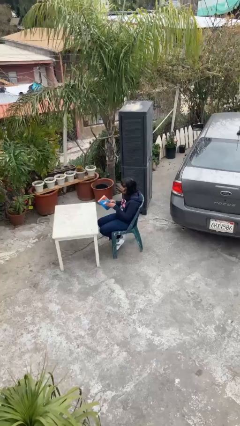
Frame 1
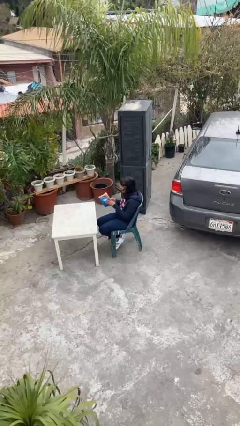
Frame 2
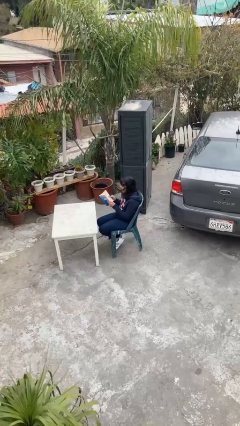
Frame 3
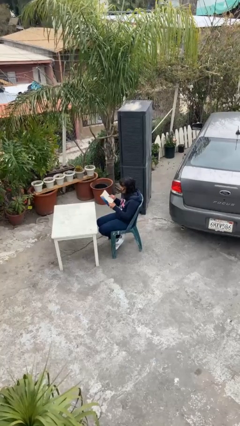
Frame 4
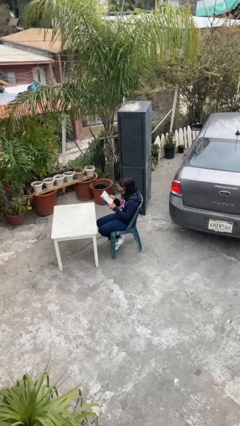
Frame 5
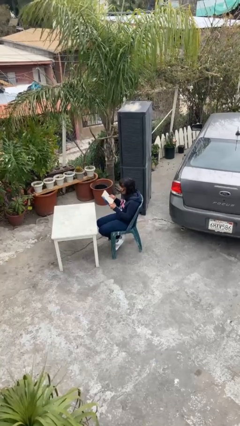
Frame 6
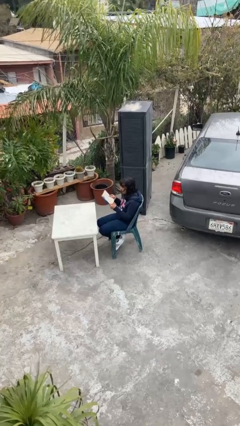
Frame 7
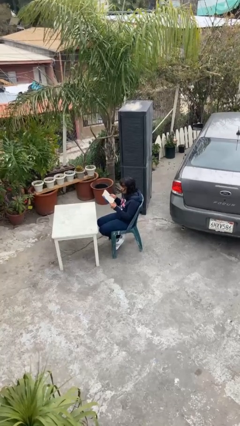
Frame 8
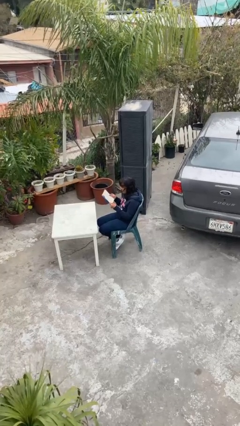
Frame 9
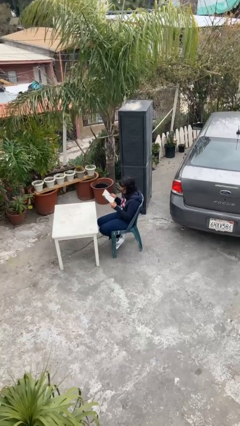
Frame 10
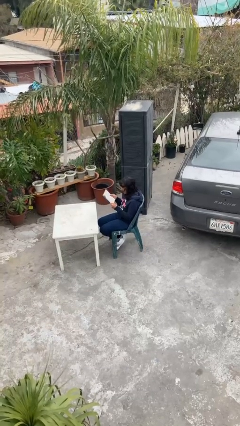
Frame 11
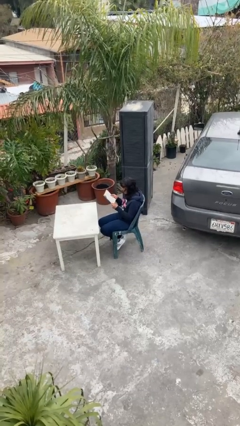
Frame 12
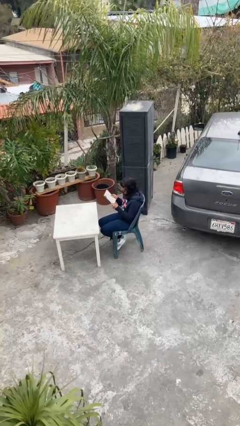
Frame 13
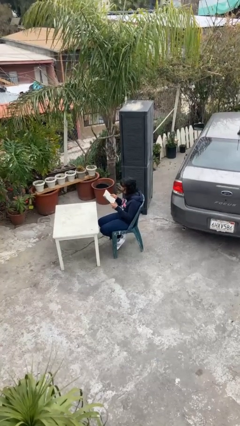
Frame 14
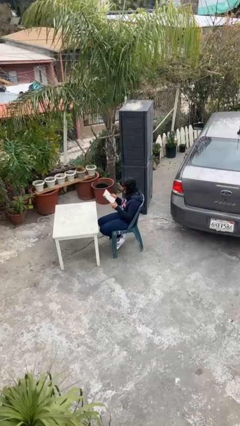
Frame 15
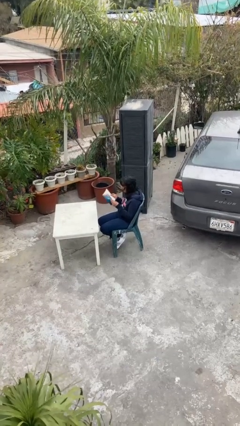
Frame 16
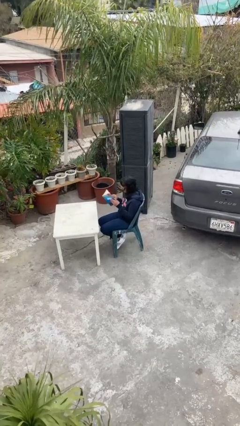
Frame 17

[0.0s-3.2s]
person reads document

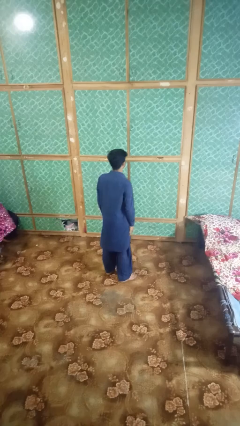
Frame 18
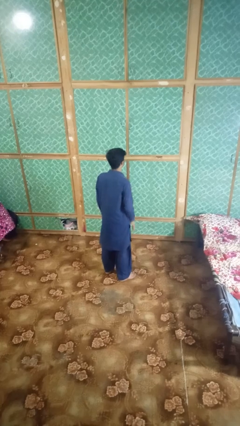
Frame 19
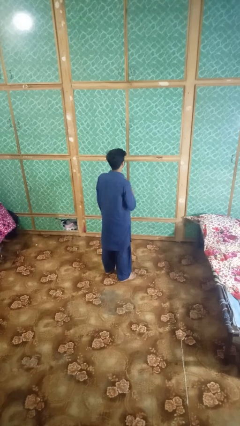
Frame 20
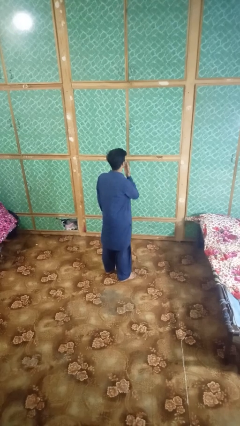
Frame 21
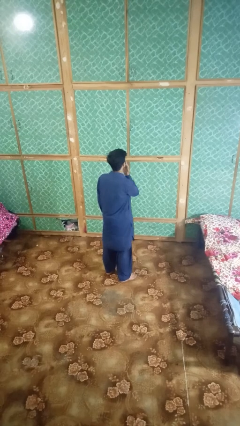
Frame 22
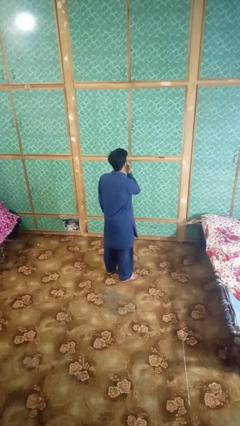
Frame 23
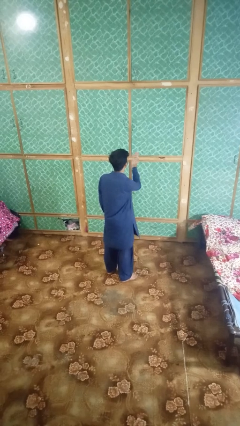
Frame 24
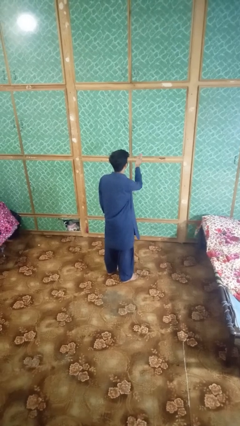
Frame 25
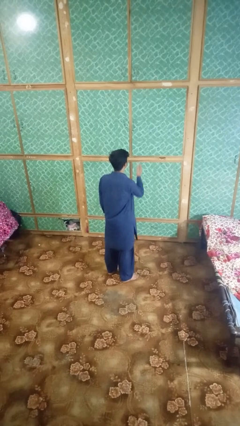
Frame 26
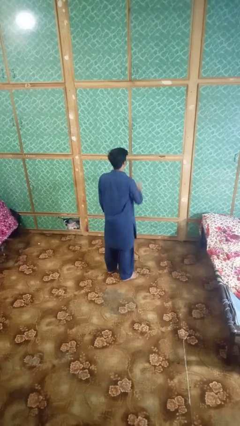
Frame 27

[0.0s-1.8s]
person gestures blow kiss

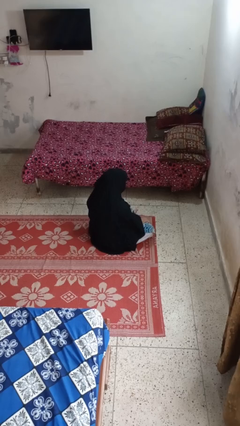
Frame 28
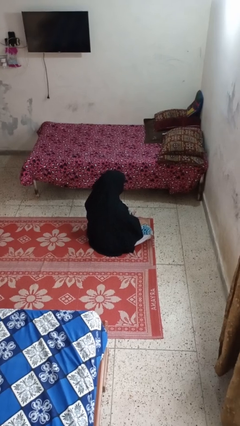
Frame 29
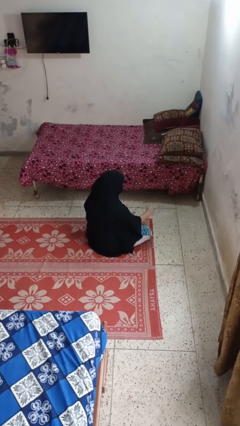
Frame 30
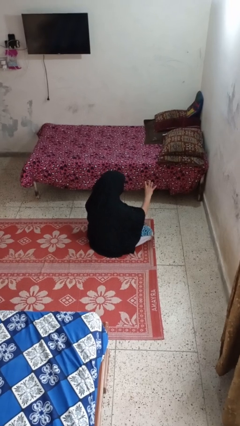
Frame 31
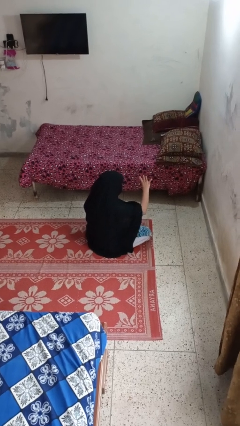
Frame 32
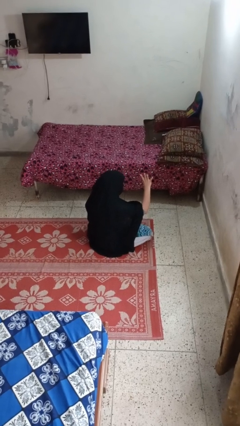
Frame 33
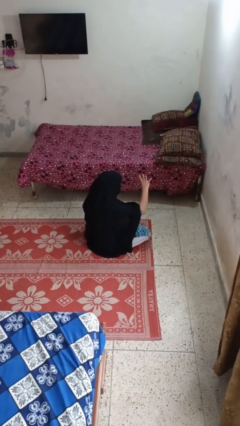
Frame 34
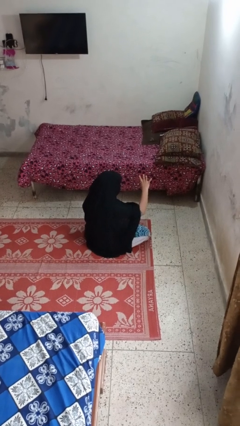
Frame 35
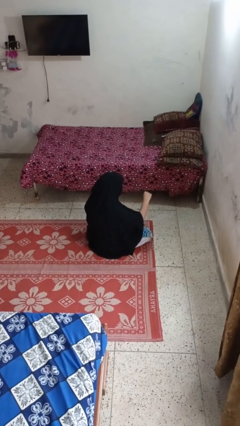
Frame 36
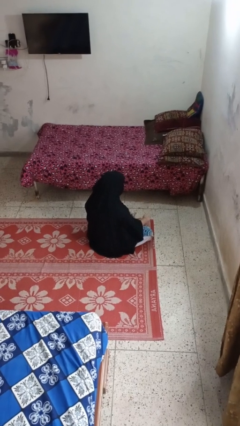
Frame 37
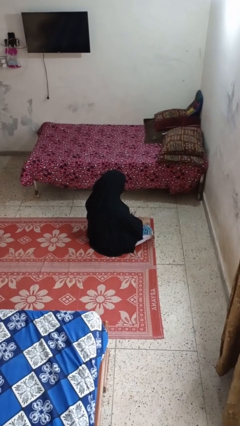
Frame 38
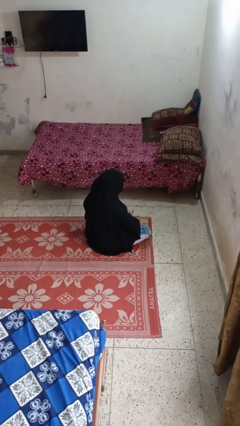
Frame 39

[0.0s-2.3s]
person gestures number four

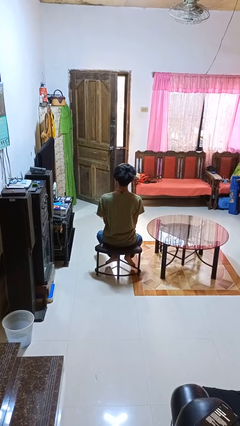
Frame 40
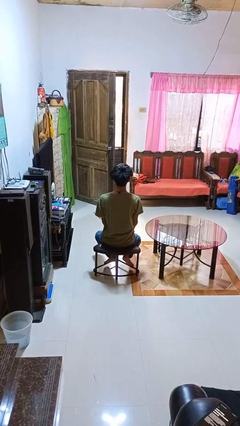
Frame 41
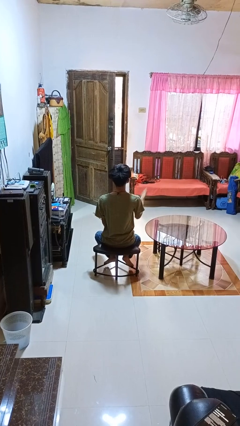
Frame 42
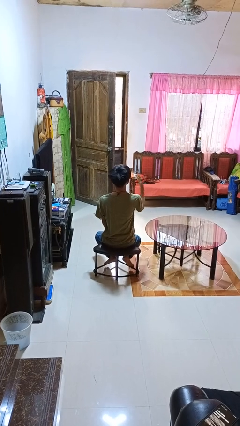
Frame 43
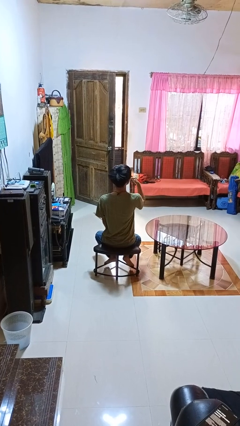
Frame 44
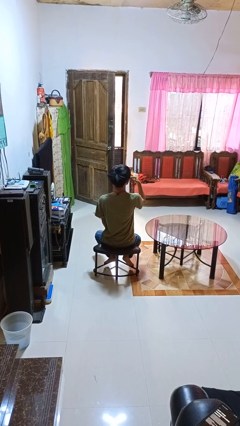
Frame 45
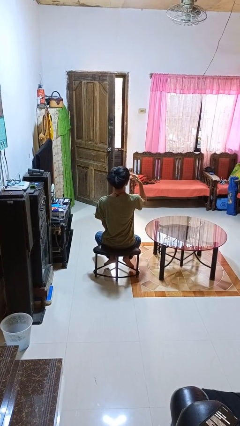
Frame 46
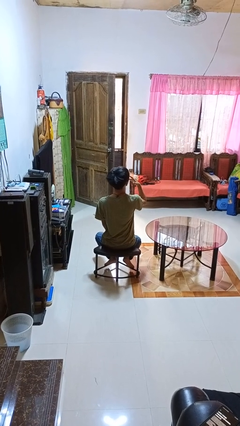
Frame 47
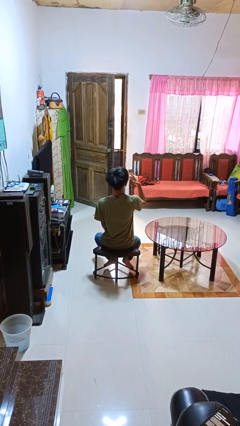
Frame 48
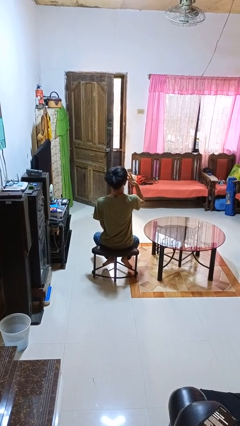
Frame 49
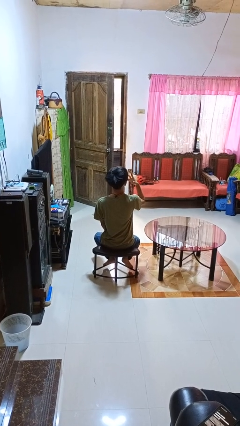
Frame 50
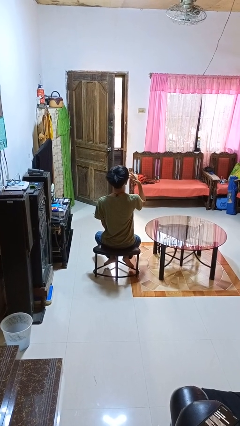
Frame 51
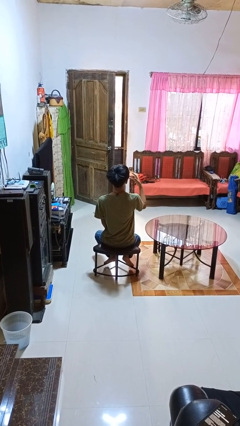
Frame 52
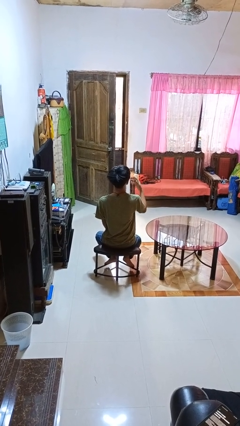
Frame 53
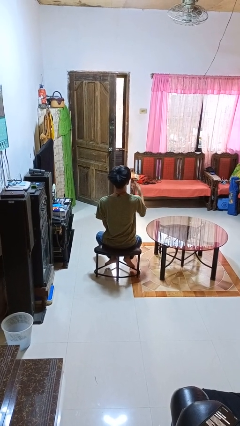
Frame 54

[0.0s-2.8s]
person licks fingers

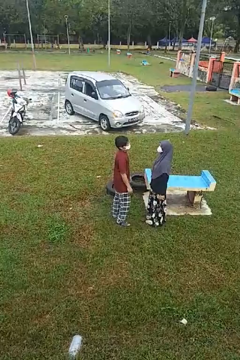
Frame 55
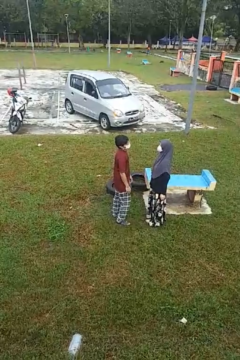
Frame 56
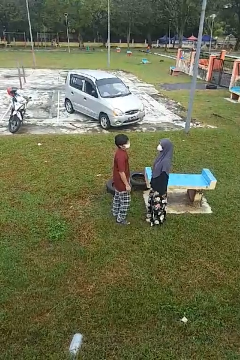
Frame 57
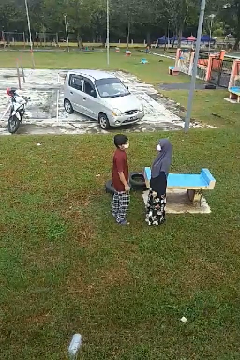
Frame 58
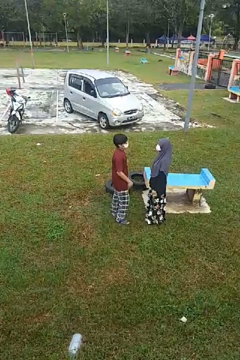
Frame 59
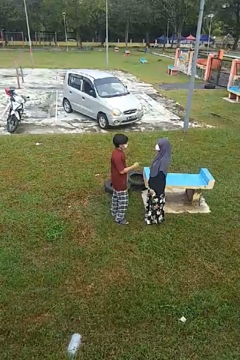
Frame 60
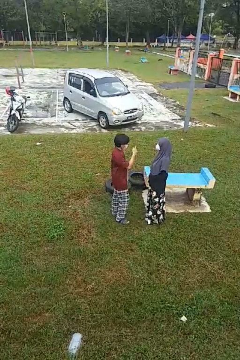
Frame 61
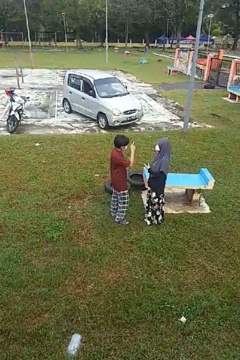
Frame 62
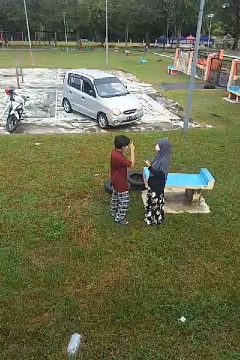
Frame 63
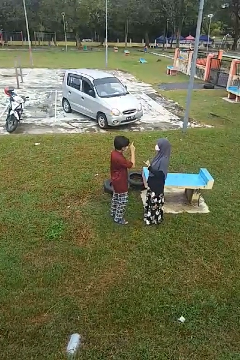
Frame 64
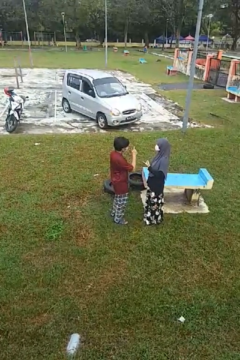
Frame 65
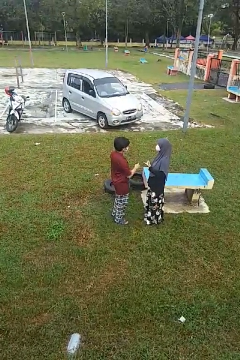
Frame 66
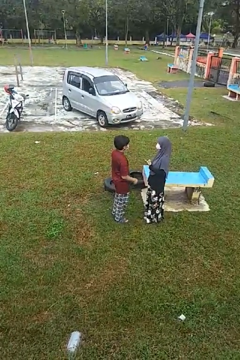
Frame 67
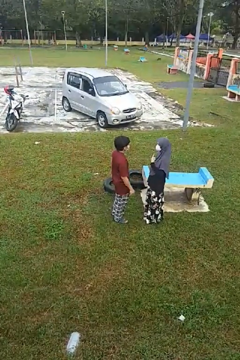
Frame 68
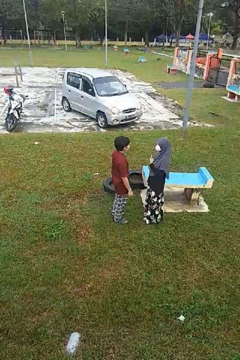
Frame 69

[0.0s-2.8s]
person talks to person

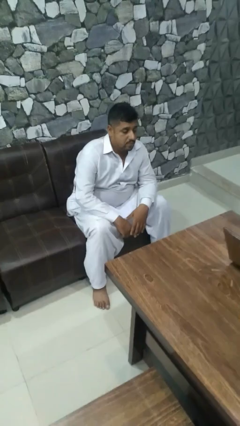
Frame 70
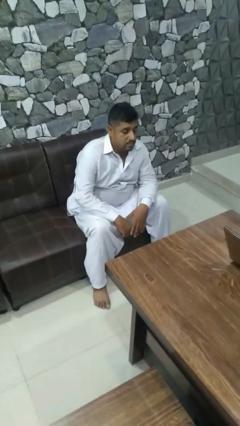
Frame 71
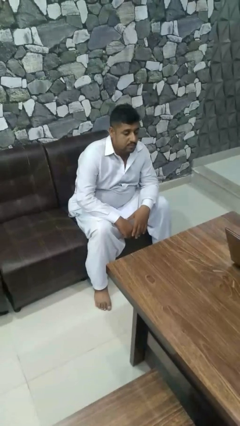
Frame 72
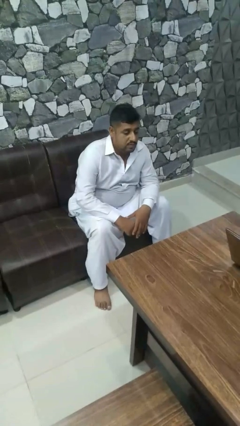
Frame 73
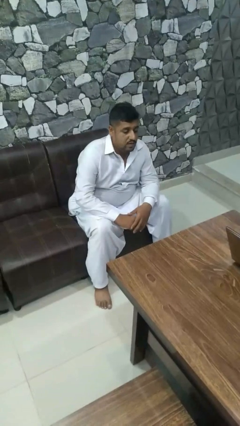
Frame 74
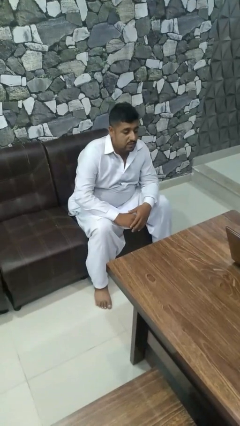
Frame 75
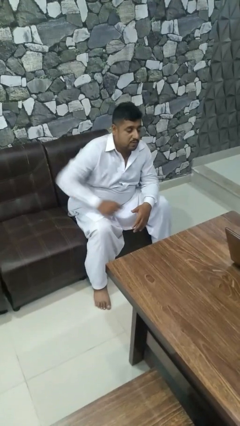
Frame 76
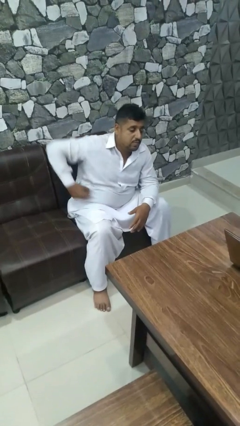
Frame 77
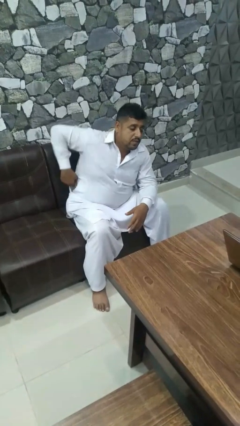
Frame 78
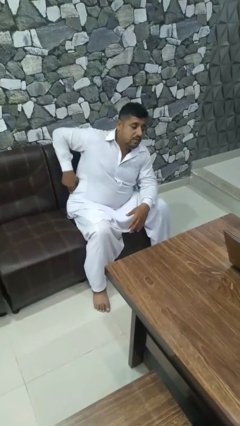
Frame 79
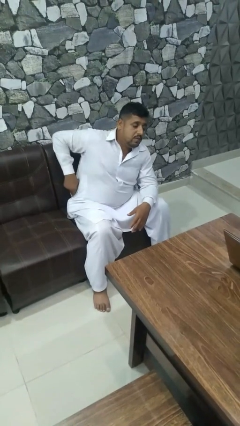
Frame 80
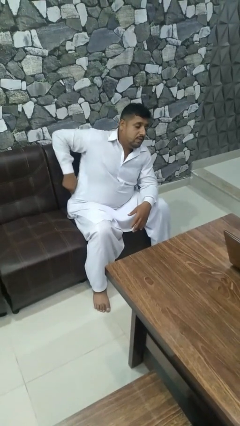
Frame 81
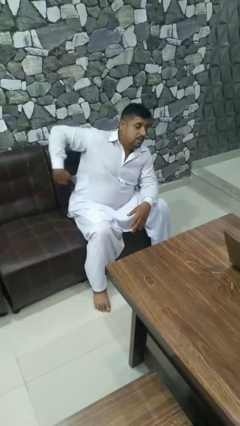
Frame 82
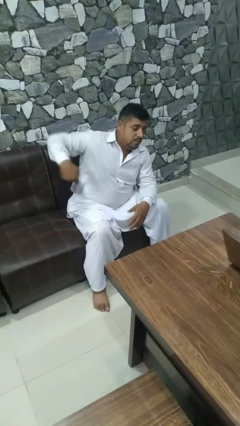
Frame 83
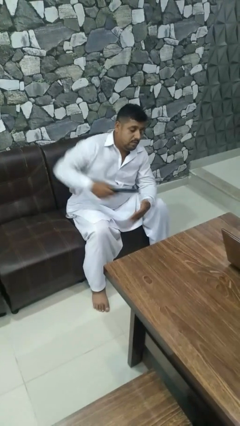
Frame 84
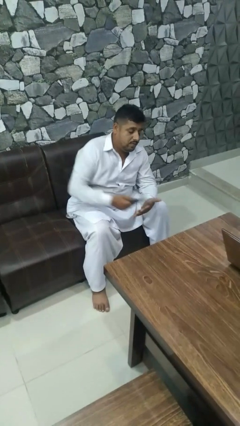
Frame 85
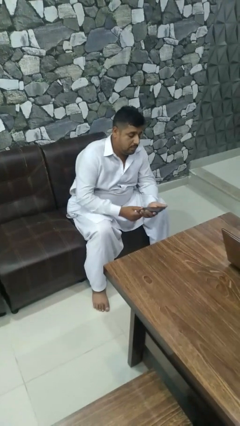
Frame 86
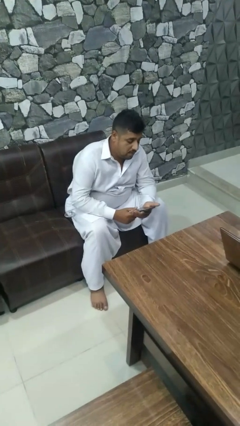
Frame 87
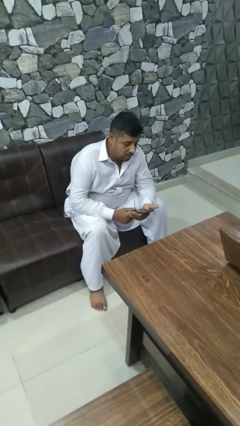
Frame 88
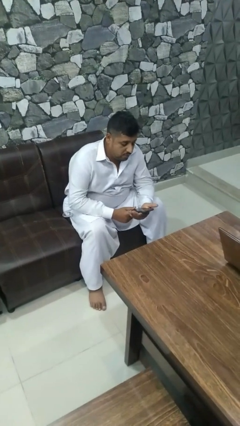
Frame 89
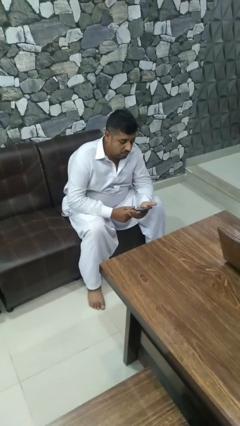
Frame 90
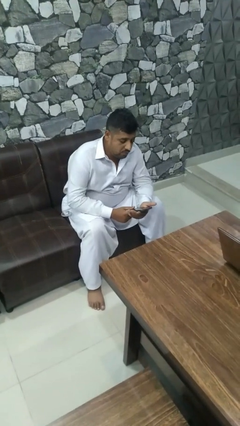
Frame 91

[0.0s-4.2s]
person takes phone from pocket

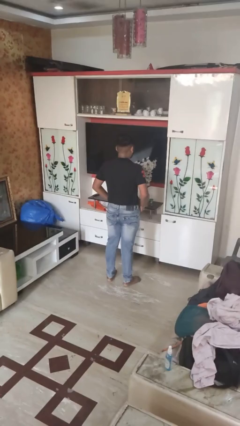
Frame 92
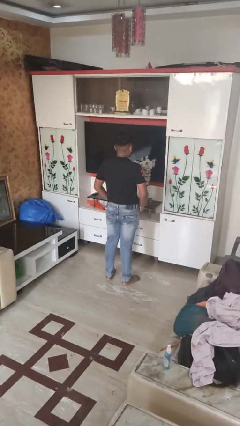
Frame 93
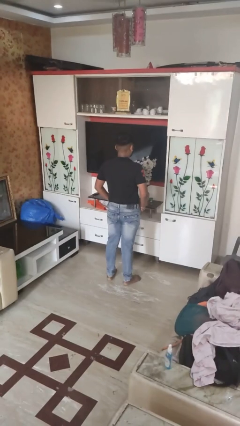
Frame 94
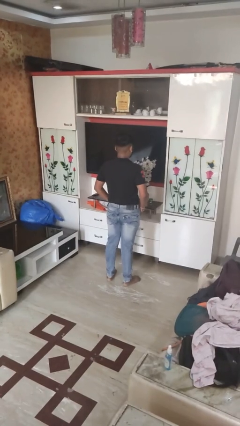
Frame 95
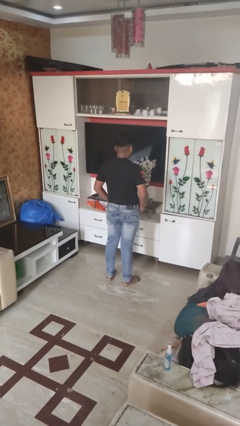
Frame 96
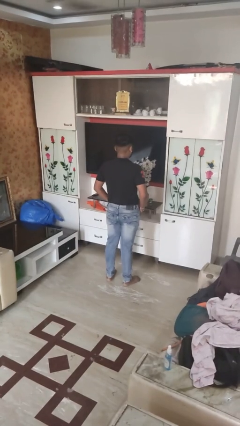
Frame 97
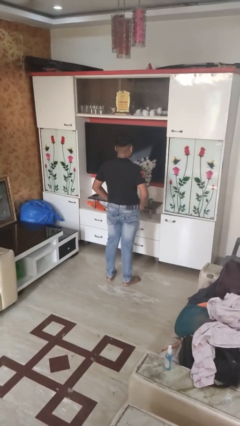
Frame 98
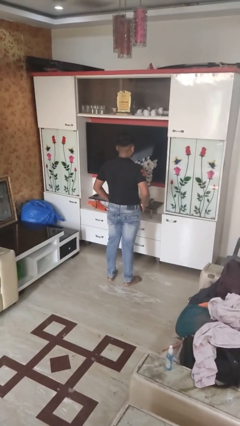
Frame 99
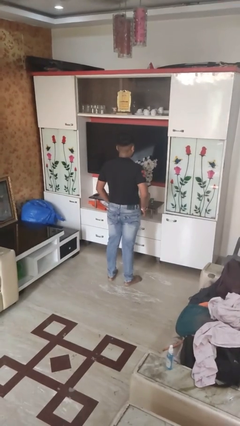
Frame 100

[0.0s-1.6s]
person puts hands in back pockets
